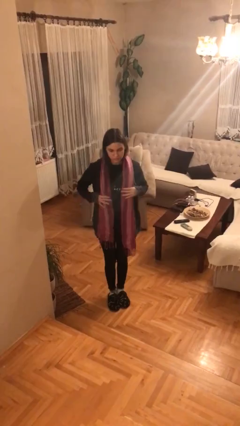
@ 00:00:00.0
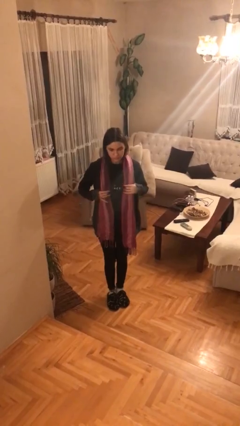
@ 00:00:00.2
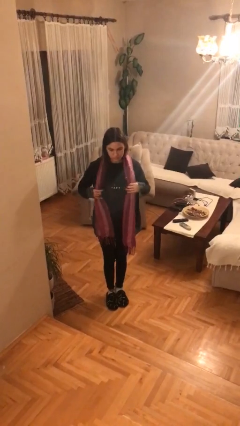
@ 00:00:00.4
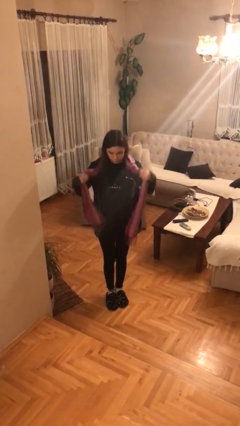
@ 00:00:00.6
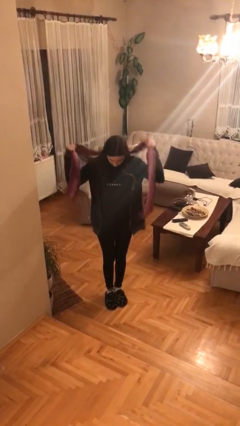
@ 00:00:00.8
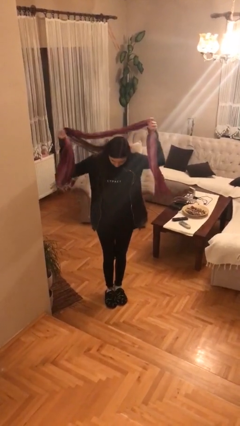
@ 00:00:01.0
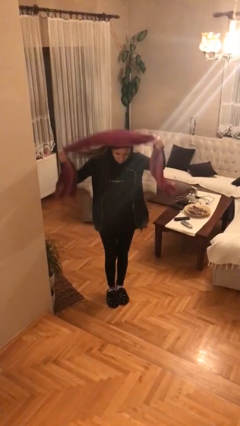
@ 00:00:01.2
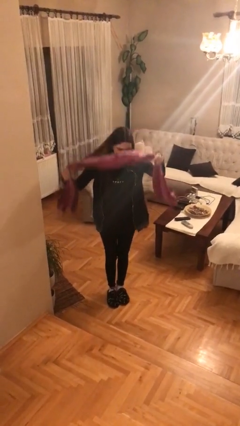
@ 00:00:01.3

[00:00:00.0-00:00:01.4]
person takes off scarf

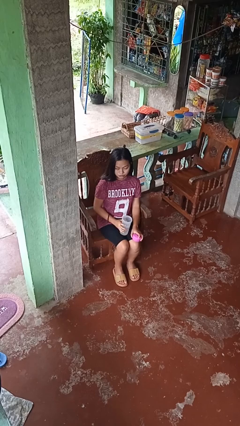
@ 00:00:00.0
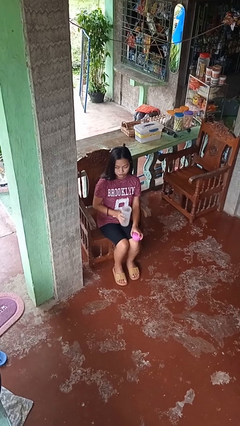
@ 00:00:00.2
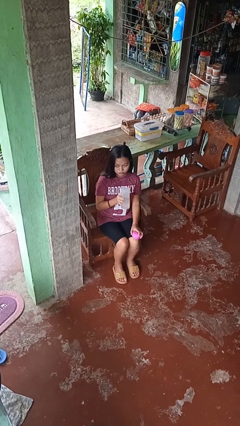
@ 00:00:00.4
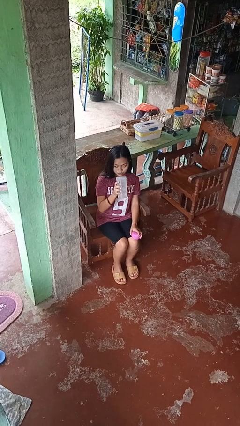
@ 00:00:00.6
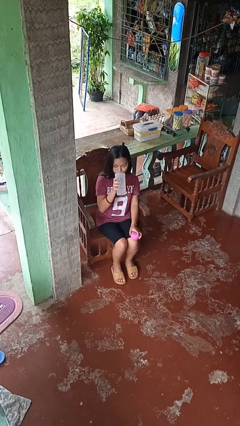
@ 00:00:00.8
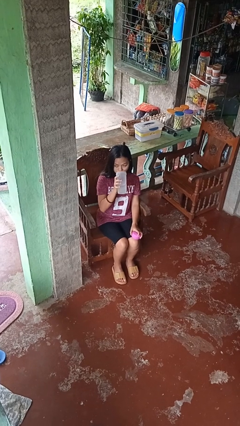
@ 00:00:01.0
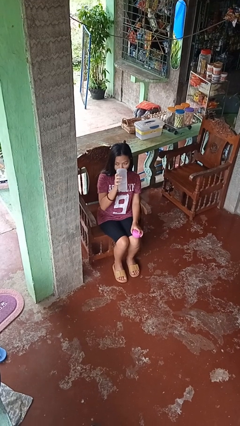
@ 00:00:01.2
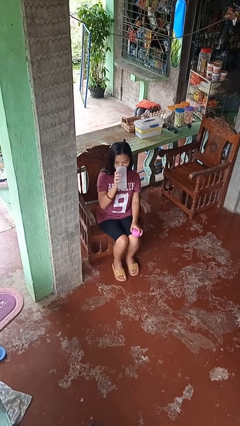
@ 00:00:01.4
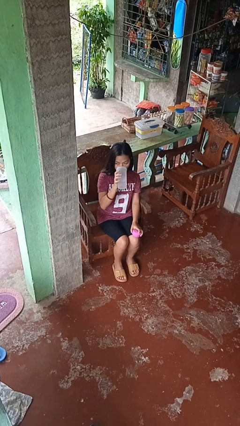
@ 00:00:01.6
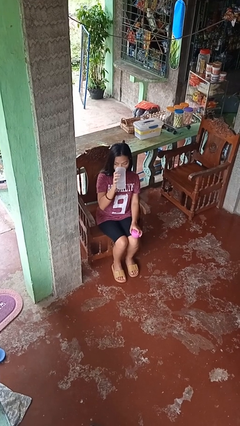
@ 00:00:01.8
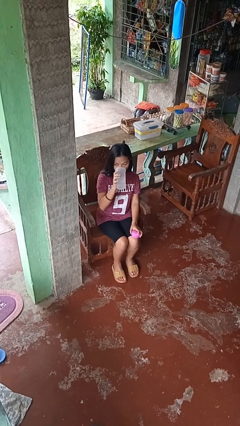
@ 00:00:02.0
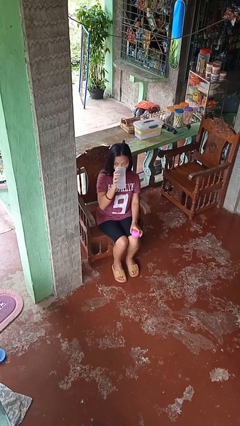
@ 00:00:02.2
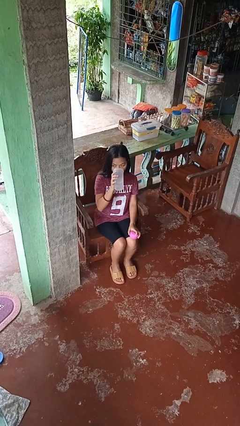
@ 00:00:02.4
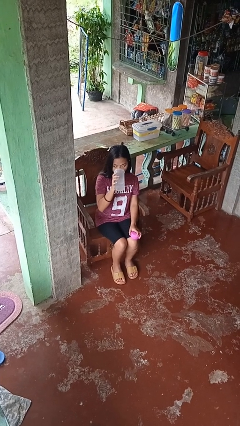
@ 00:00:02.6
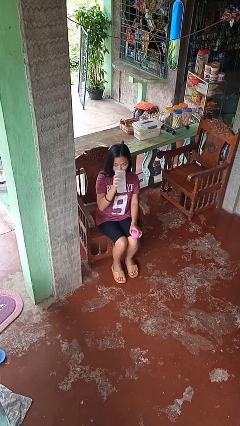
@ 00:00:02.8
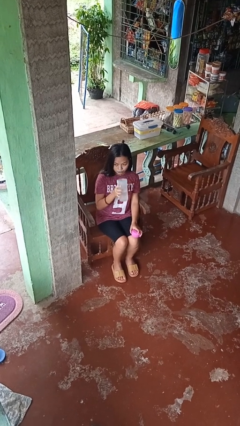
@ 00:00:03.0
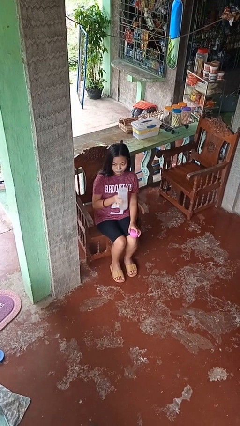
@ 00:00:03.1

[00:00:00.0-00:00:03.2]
person drinks from bottle

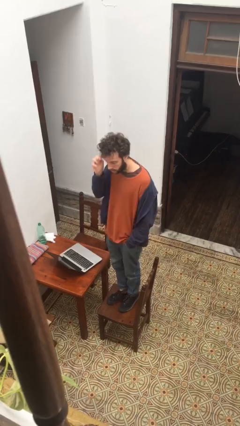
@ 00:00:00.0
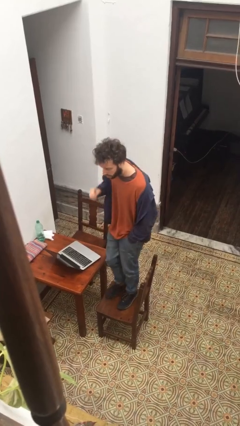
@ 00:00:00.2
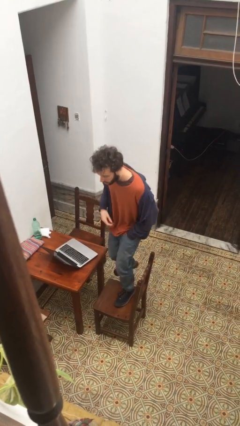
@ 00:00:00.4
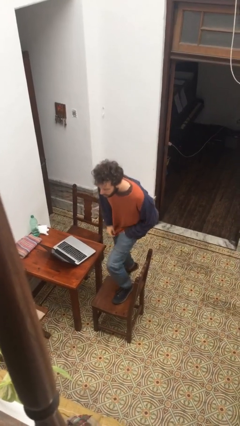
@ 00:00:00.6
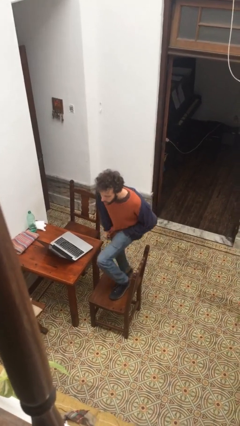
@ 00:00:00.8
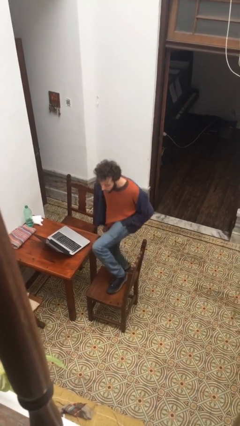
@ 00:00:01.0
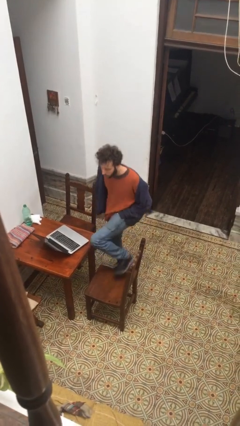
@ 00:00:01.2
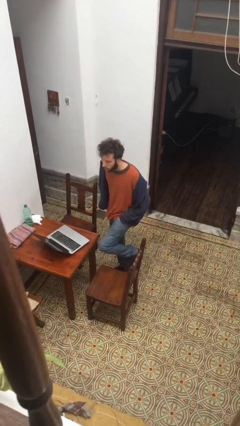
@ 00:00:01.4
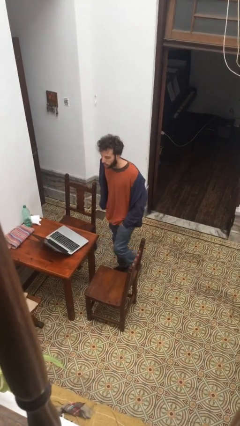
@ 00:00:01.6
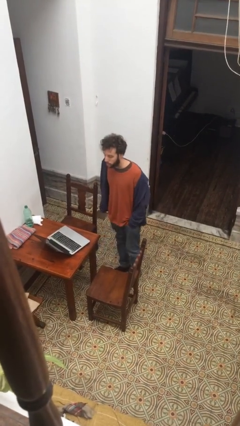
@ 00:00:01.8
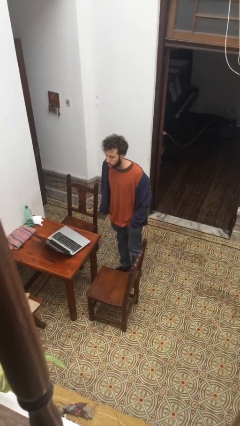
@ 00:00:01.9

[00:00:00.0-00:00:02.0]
person climbs off chair

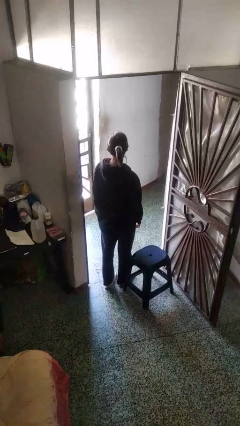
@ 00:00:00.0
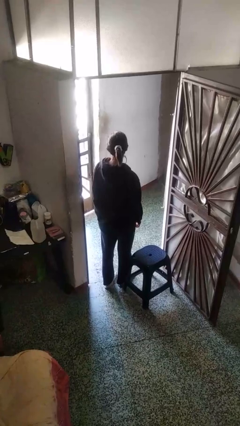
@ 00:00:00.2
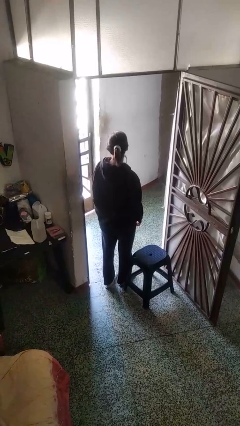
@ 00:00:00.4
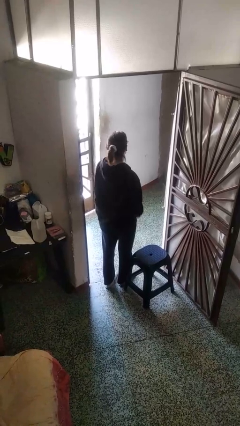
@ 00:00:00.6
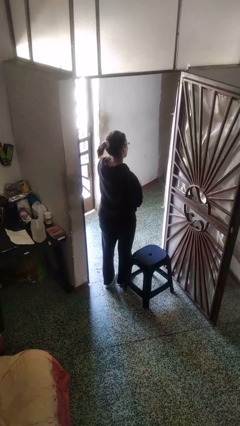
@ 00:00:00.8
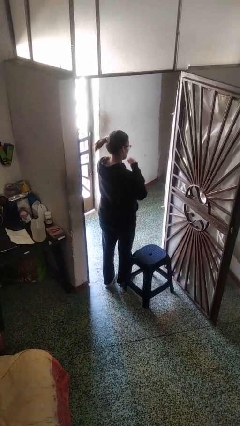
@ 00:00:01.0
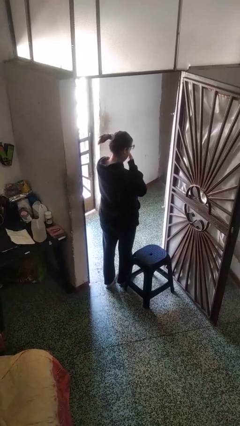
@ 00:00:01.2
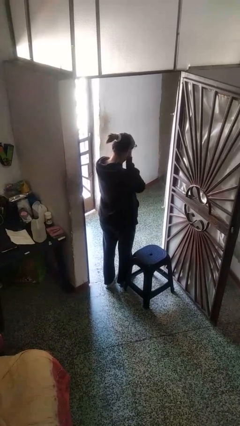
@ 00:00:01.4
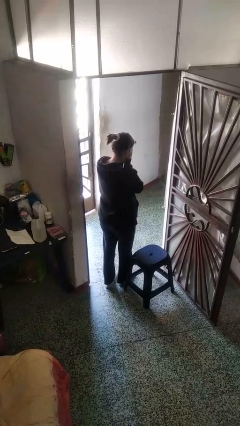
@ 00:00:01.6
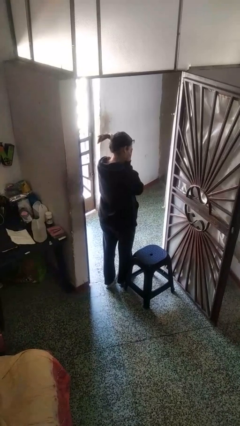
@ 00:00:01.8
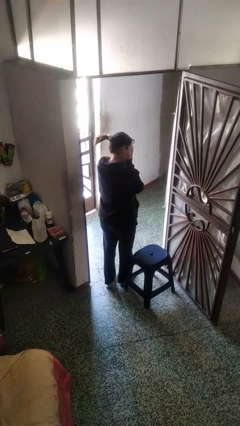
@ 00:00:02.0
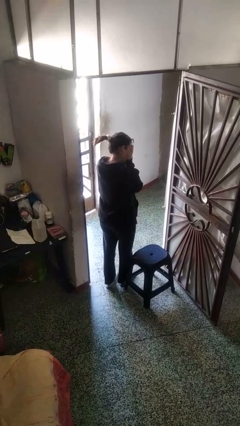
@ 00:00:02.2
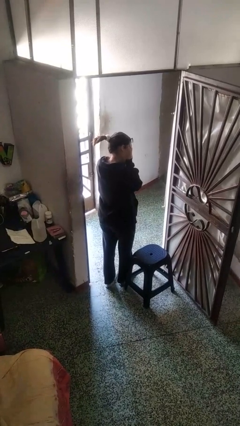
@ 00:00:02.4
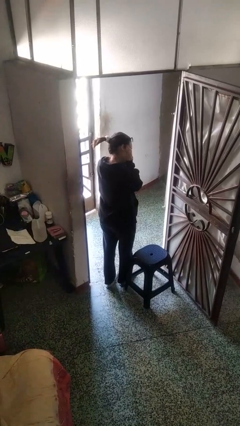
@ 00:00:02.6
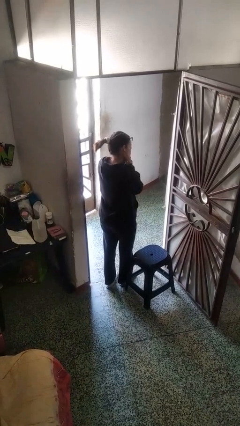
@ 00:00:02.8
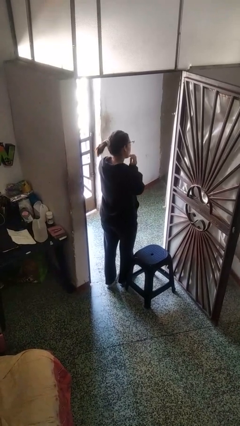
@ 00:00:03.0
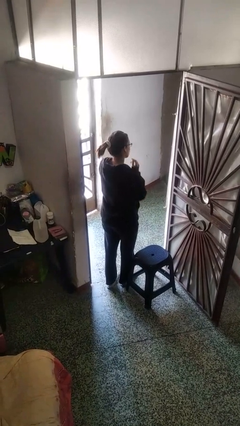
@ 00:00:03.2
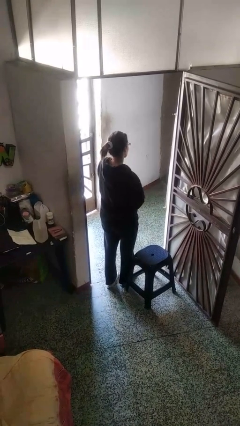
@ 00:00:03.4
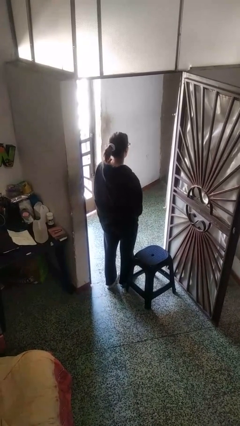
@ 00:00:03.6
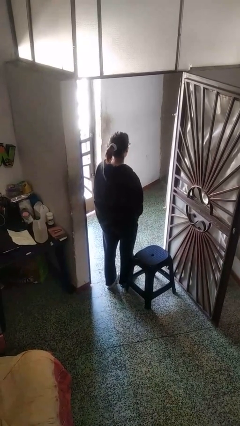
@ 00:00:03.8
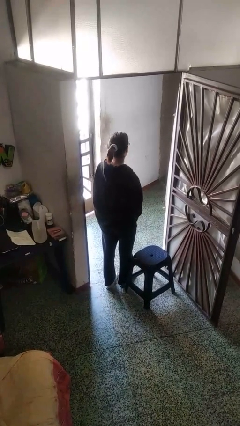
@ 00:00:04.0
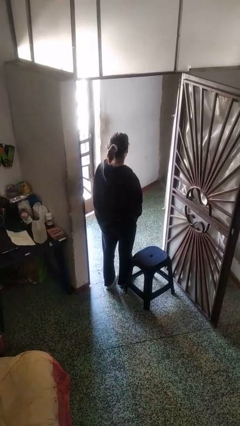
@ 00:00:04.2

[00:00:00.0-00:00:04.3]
person rubs eyes

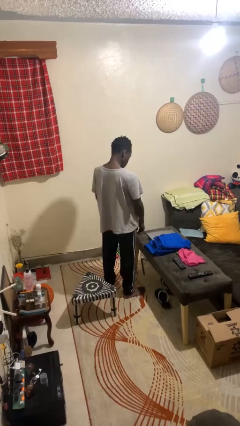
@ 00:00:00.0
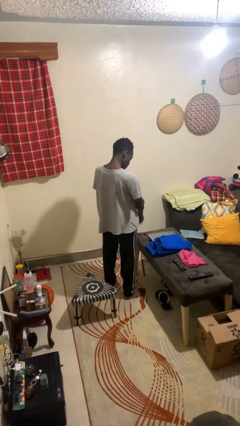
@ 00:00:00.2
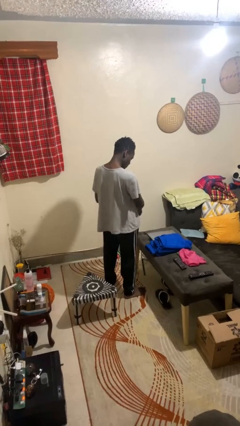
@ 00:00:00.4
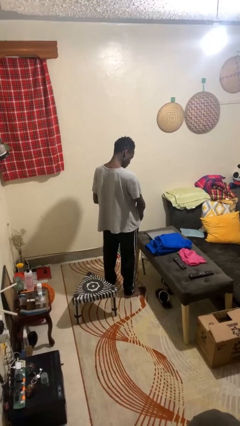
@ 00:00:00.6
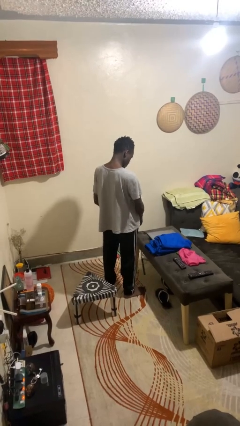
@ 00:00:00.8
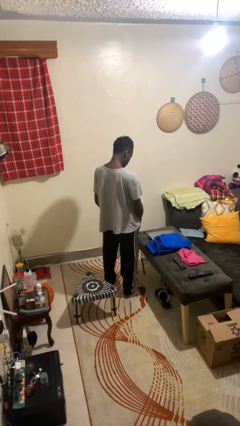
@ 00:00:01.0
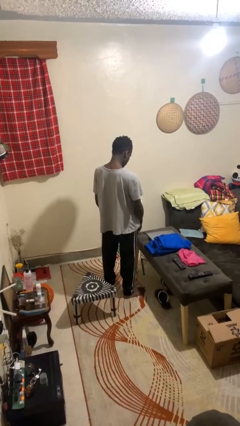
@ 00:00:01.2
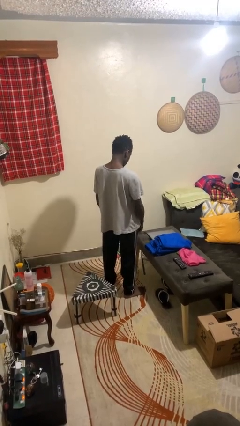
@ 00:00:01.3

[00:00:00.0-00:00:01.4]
person swats bug

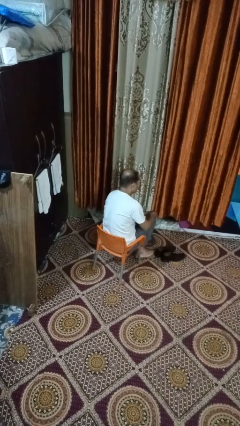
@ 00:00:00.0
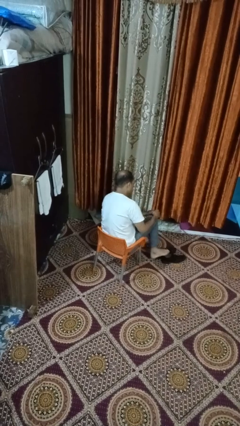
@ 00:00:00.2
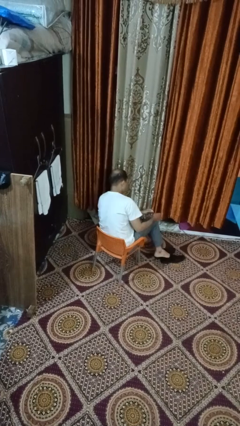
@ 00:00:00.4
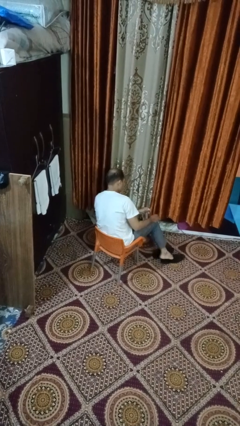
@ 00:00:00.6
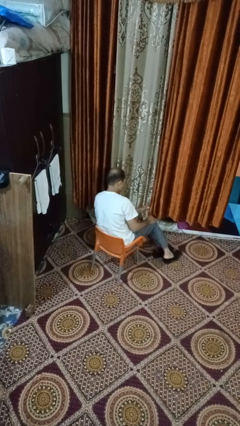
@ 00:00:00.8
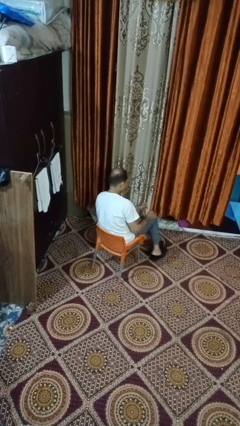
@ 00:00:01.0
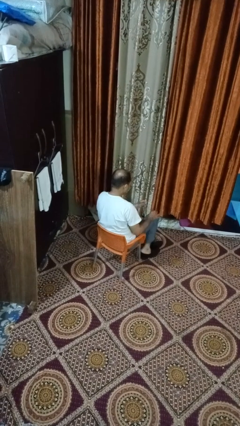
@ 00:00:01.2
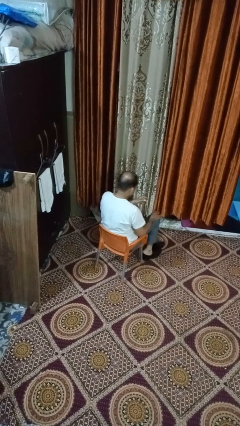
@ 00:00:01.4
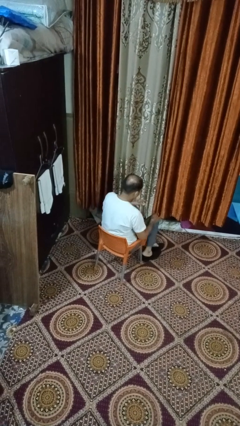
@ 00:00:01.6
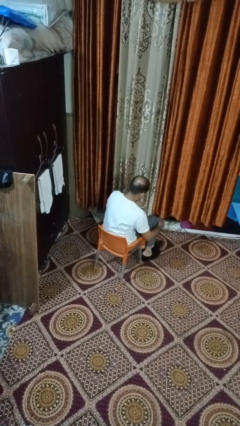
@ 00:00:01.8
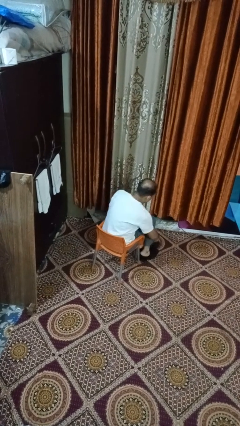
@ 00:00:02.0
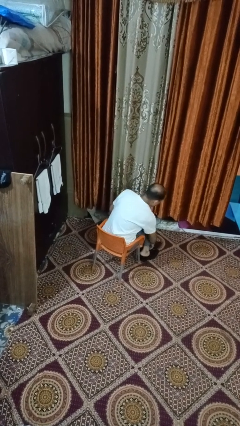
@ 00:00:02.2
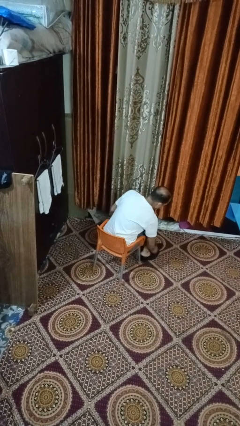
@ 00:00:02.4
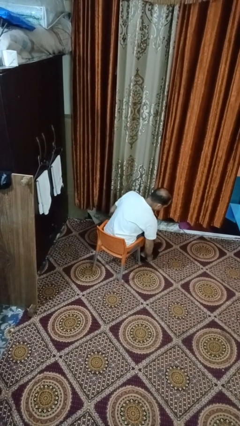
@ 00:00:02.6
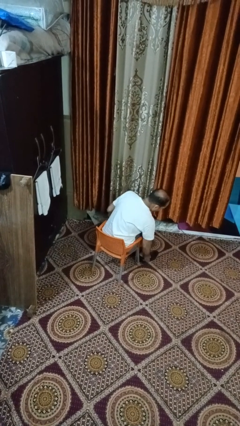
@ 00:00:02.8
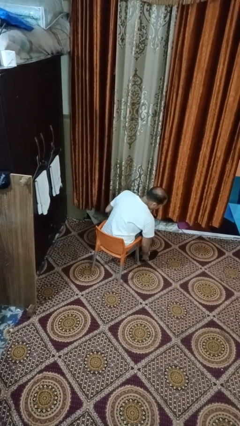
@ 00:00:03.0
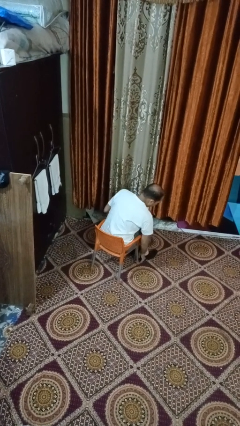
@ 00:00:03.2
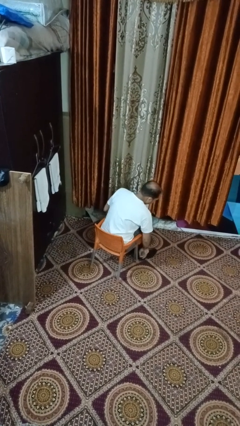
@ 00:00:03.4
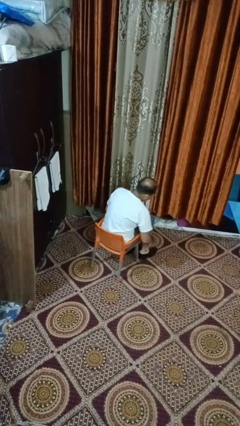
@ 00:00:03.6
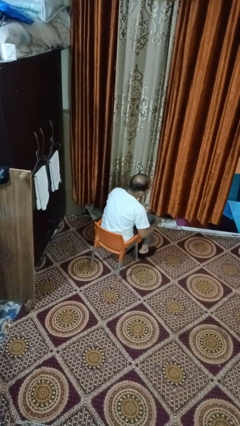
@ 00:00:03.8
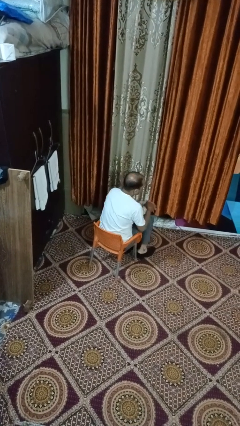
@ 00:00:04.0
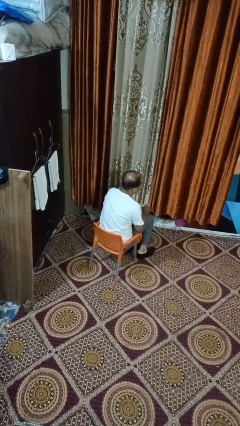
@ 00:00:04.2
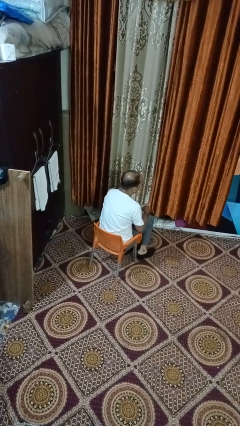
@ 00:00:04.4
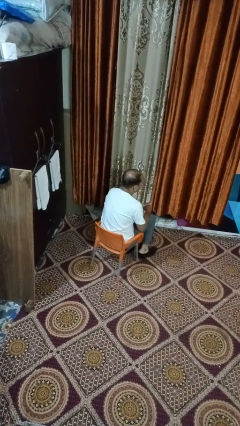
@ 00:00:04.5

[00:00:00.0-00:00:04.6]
person puts on shoes

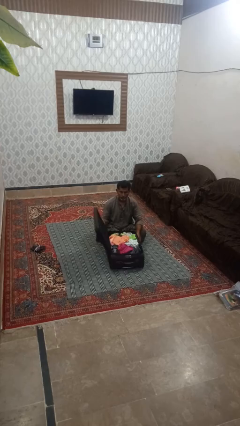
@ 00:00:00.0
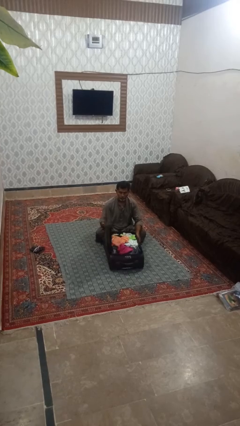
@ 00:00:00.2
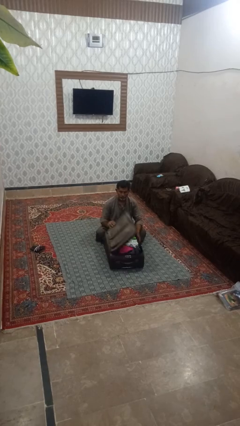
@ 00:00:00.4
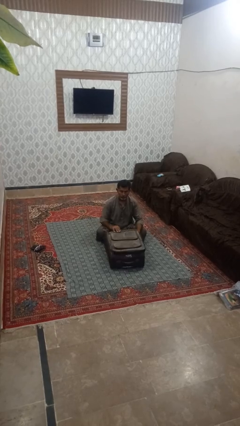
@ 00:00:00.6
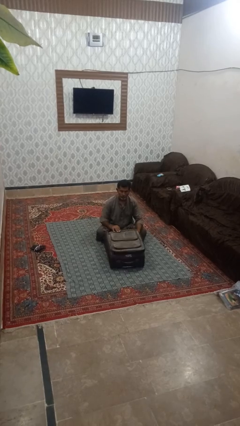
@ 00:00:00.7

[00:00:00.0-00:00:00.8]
person closes suitcase
